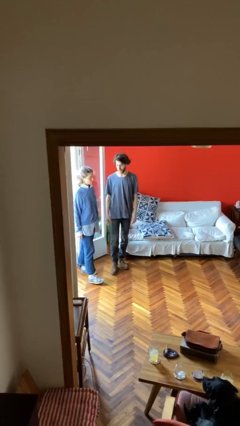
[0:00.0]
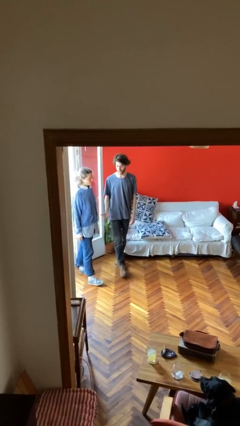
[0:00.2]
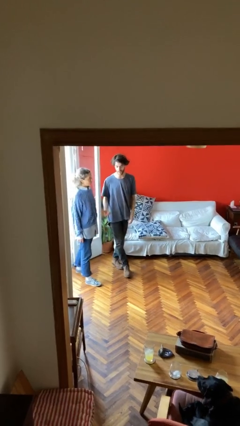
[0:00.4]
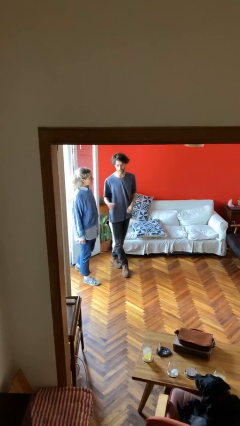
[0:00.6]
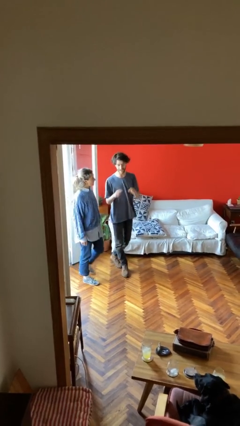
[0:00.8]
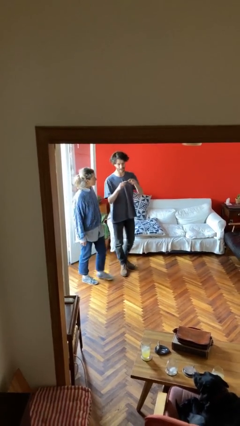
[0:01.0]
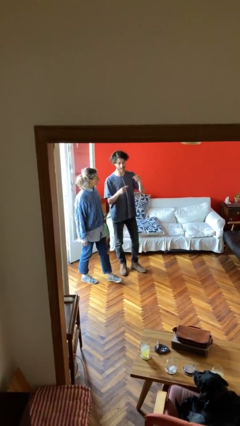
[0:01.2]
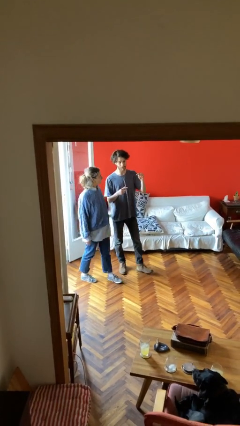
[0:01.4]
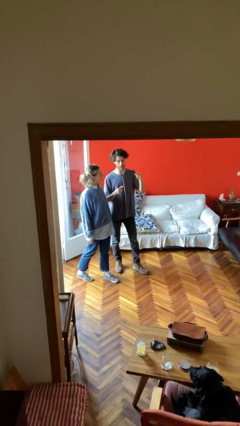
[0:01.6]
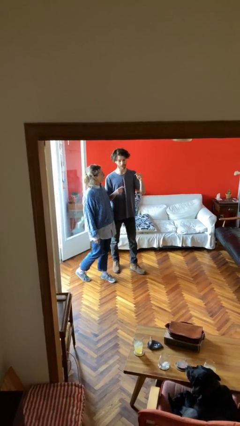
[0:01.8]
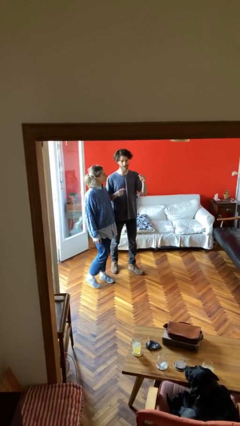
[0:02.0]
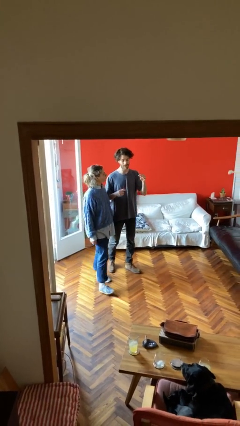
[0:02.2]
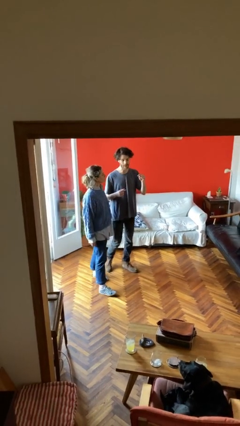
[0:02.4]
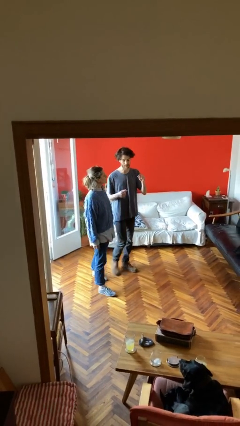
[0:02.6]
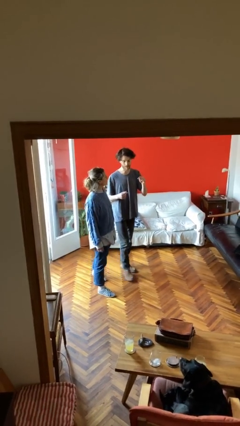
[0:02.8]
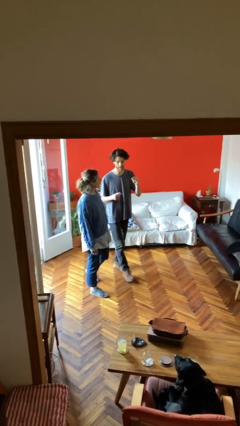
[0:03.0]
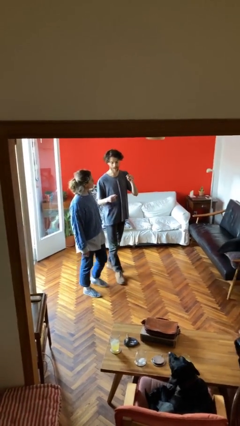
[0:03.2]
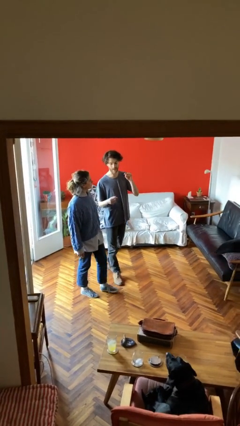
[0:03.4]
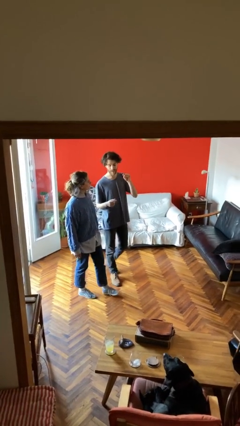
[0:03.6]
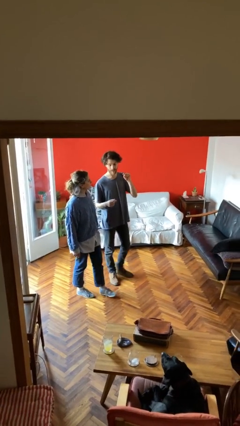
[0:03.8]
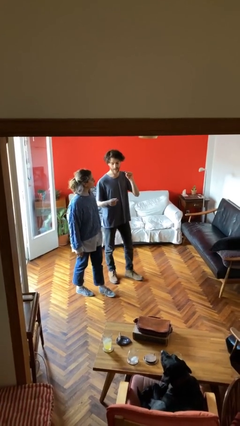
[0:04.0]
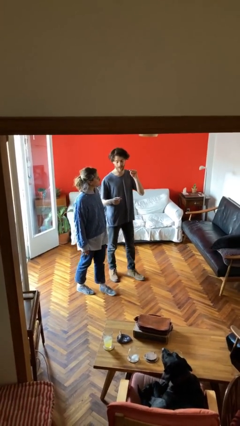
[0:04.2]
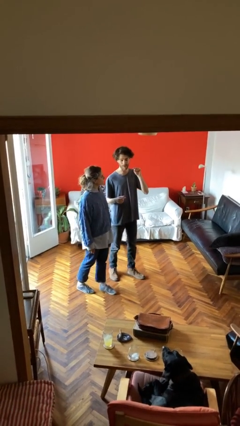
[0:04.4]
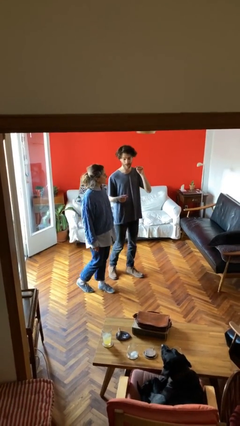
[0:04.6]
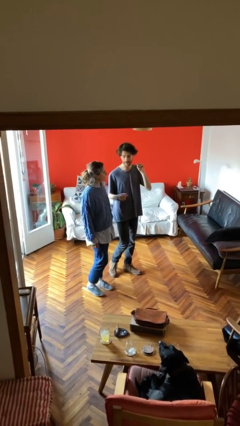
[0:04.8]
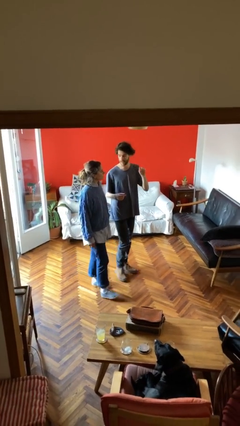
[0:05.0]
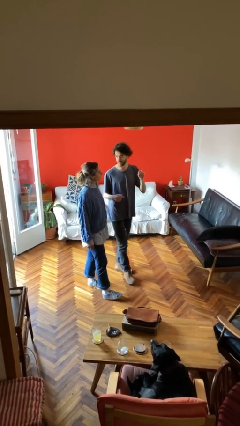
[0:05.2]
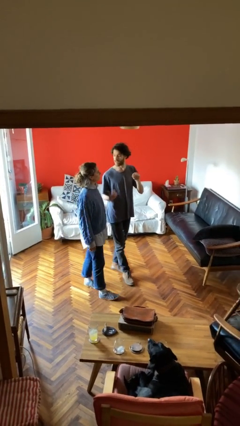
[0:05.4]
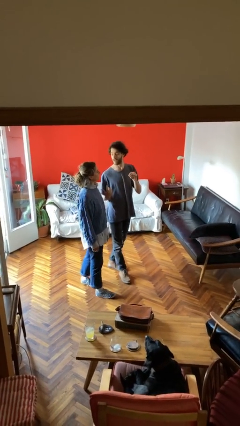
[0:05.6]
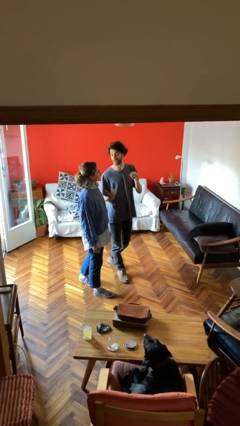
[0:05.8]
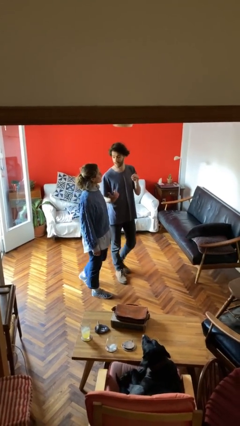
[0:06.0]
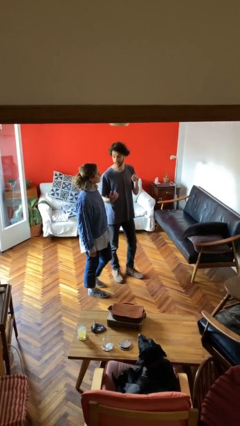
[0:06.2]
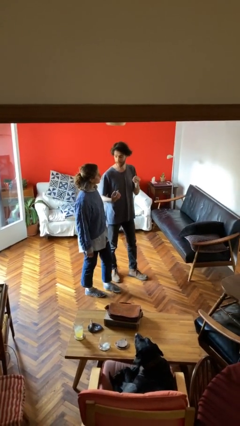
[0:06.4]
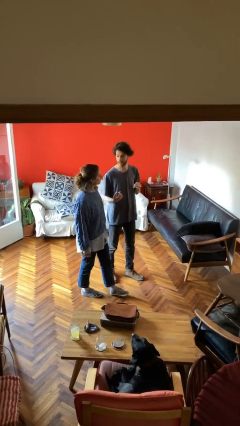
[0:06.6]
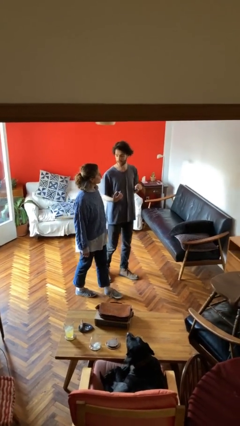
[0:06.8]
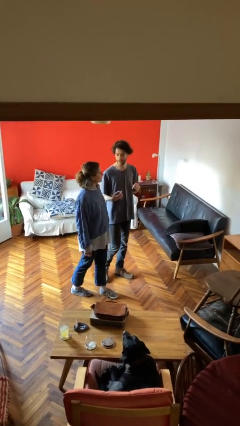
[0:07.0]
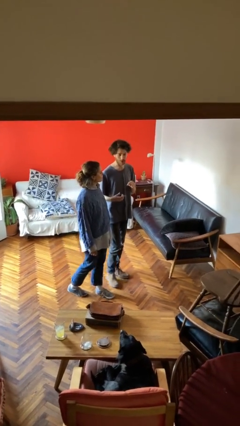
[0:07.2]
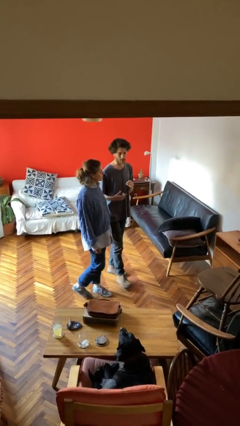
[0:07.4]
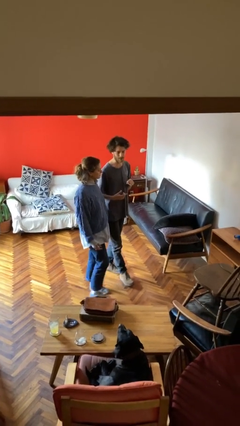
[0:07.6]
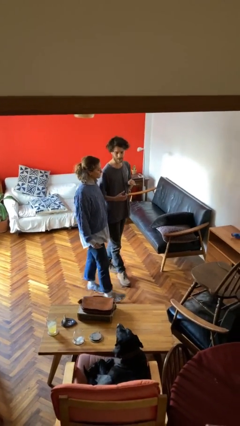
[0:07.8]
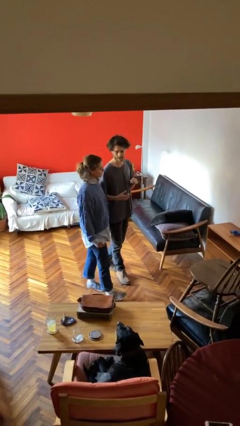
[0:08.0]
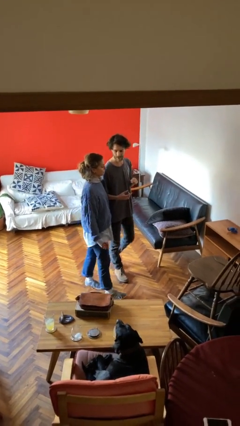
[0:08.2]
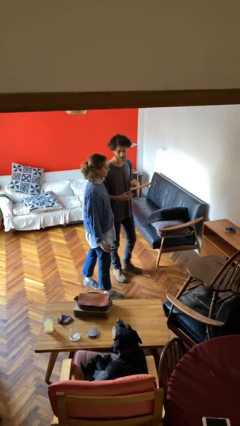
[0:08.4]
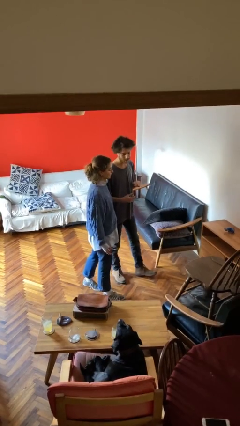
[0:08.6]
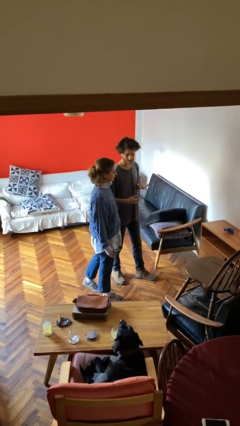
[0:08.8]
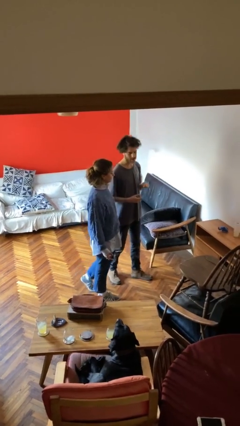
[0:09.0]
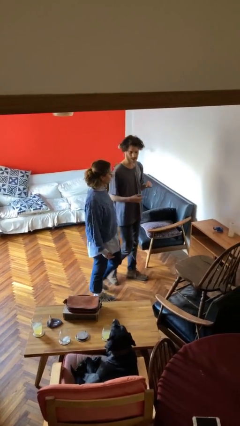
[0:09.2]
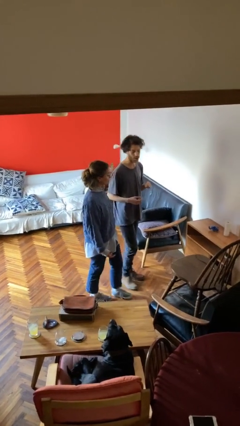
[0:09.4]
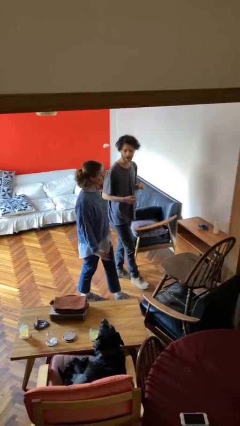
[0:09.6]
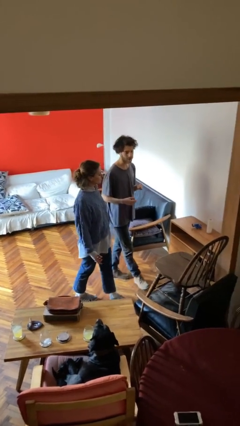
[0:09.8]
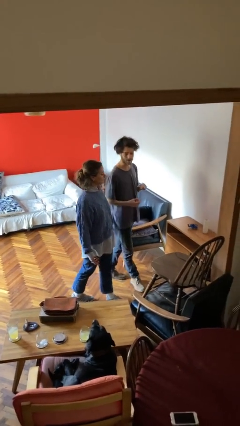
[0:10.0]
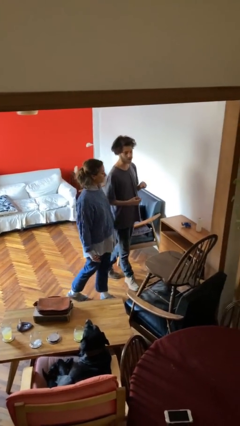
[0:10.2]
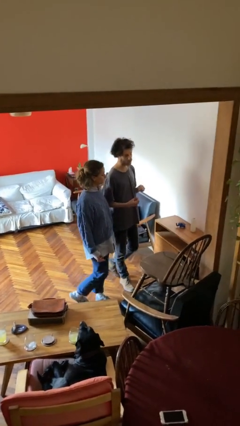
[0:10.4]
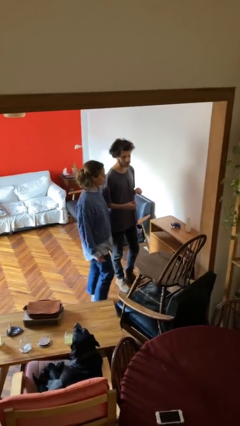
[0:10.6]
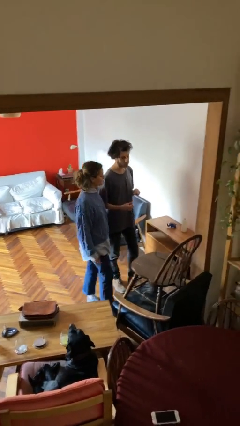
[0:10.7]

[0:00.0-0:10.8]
person talks to person

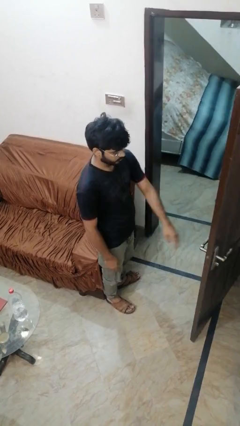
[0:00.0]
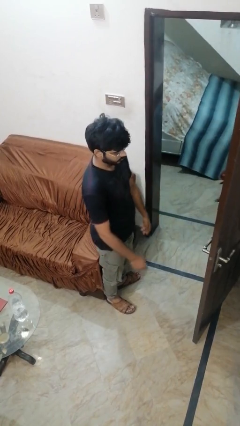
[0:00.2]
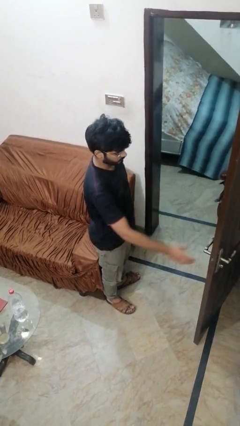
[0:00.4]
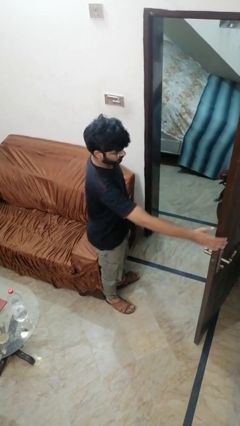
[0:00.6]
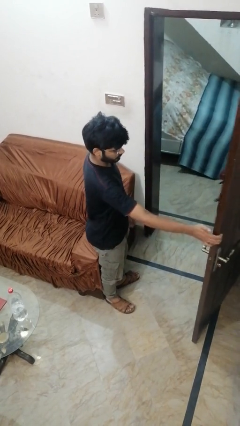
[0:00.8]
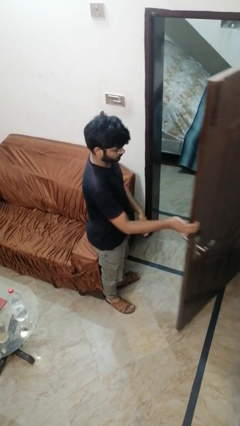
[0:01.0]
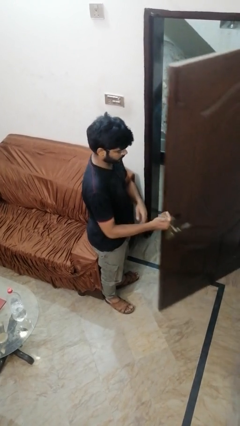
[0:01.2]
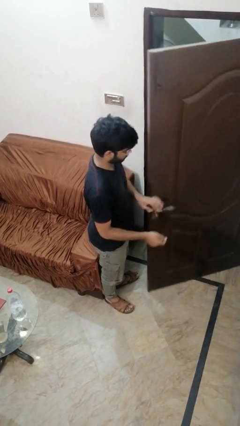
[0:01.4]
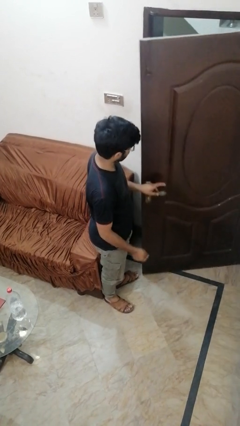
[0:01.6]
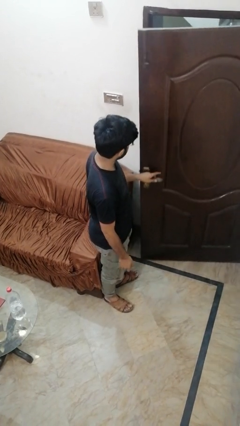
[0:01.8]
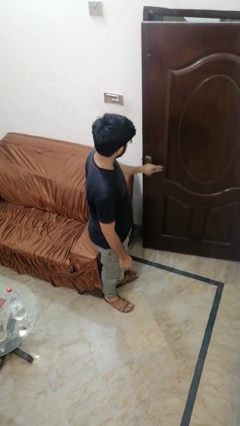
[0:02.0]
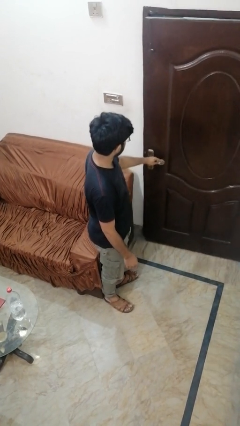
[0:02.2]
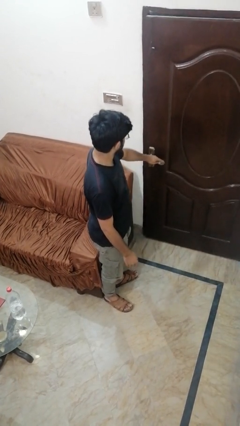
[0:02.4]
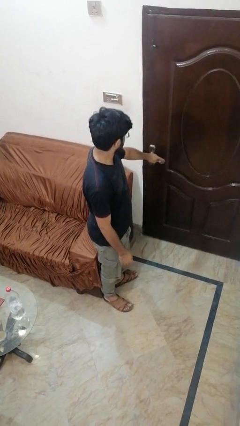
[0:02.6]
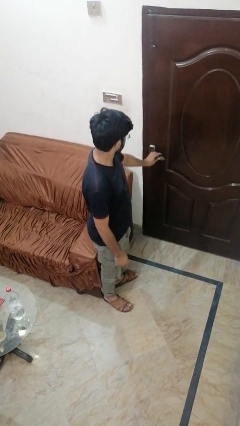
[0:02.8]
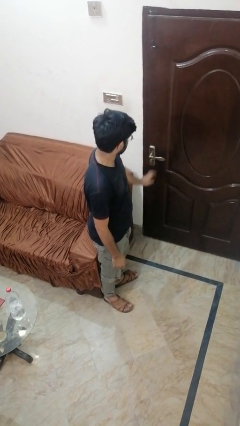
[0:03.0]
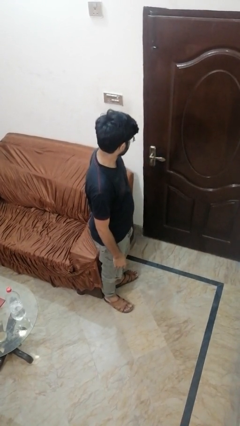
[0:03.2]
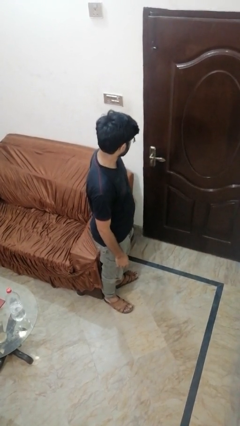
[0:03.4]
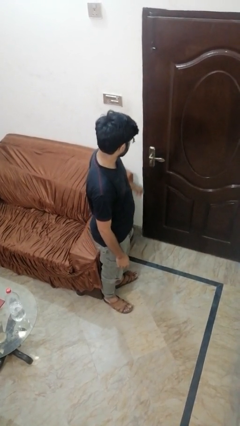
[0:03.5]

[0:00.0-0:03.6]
person closes facility door

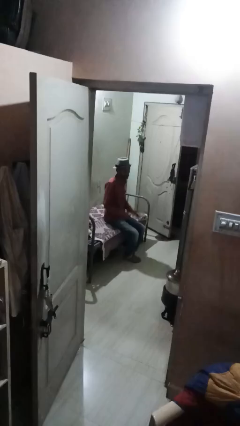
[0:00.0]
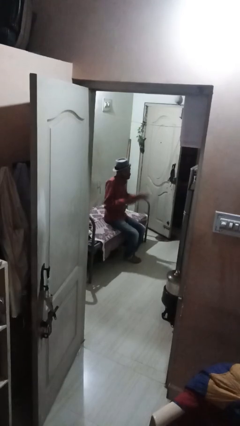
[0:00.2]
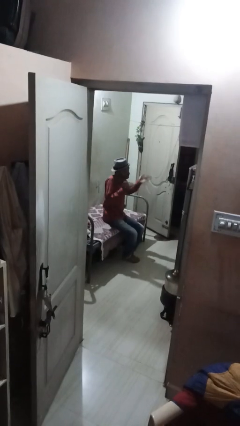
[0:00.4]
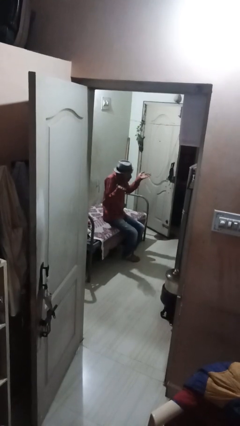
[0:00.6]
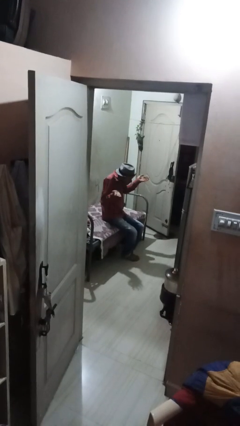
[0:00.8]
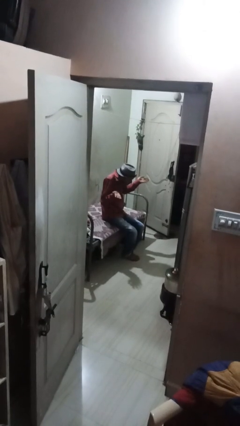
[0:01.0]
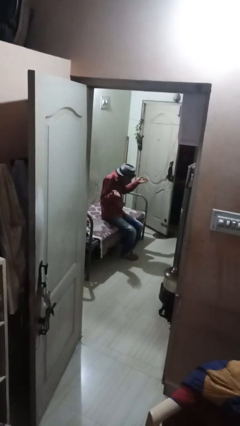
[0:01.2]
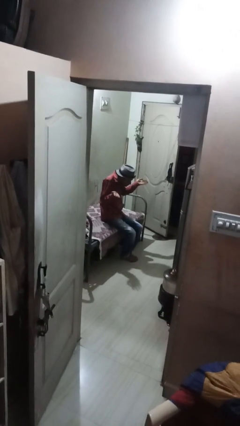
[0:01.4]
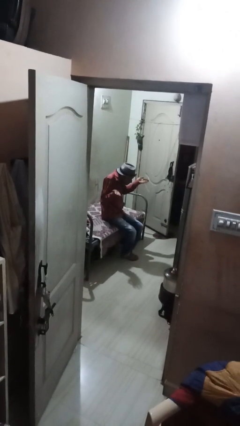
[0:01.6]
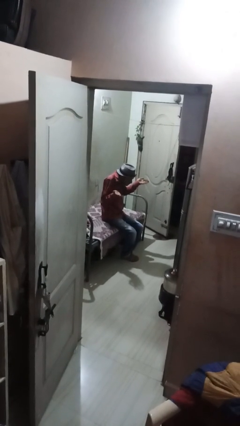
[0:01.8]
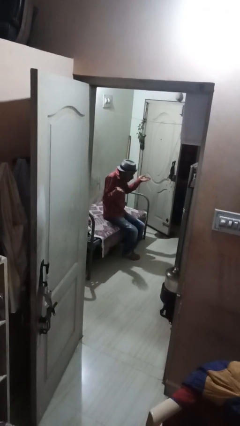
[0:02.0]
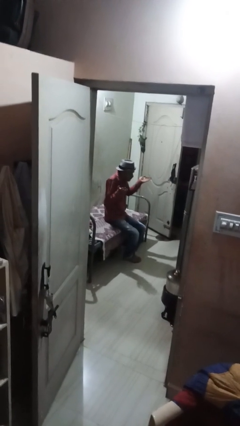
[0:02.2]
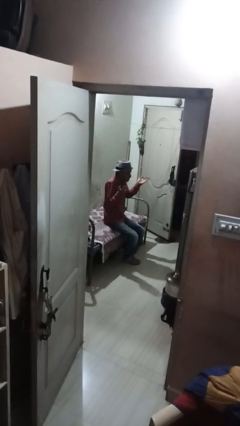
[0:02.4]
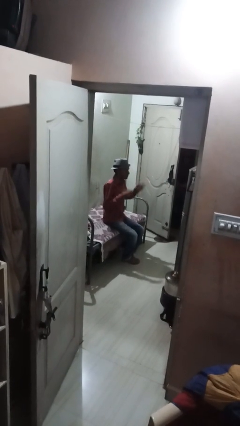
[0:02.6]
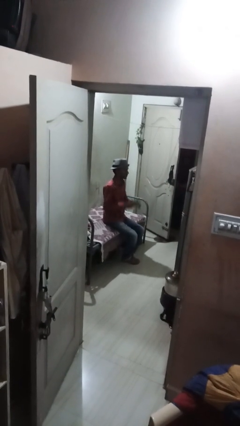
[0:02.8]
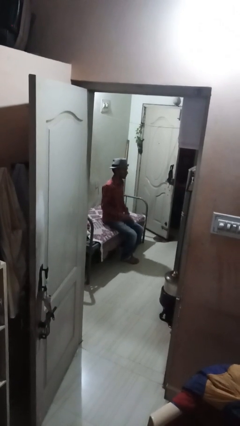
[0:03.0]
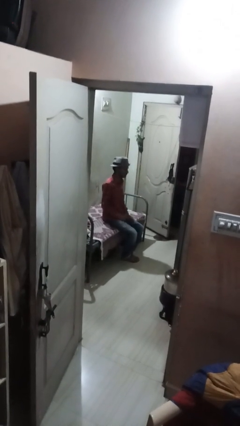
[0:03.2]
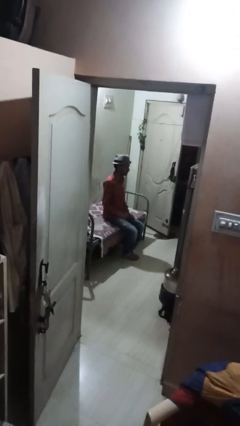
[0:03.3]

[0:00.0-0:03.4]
person shrugs
